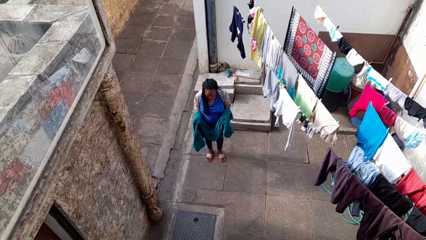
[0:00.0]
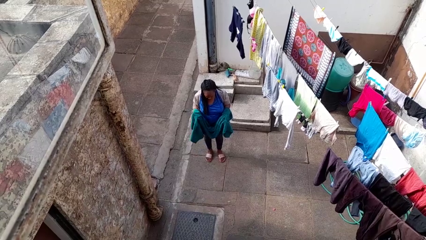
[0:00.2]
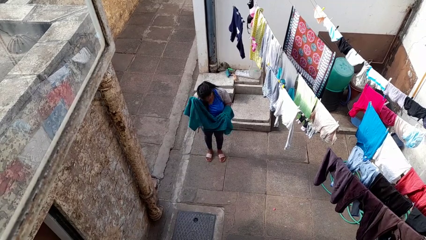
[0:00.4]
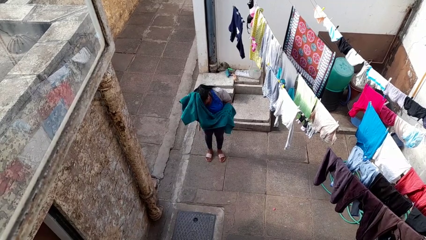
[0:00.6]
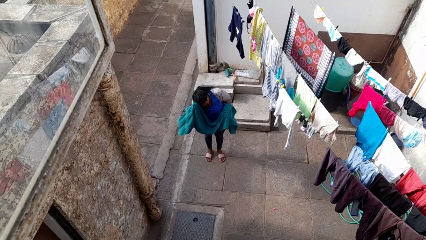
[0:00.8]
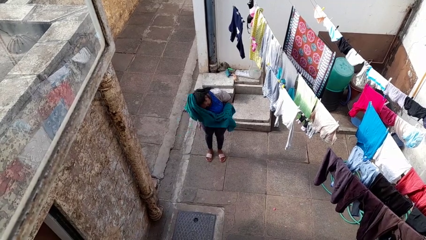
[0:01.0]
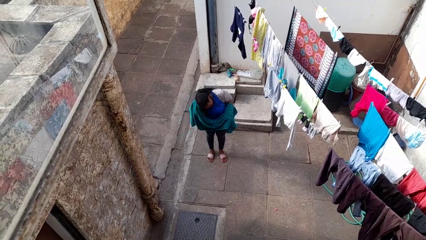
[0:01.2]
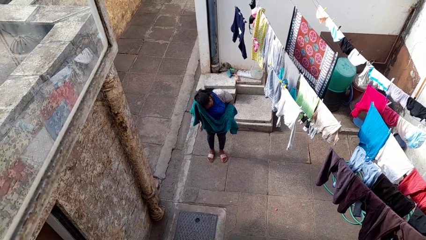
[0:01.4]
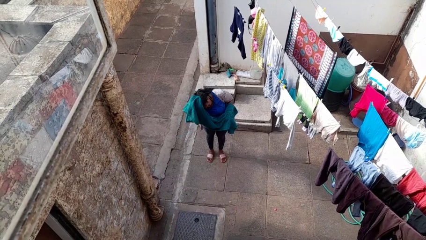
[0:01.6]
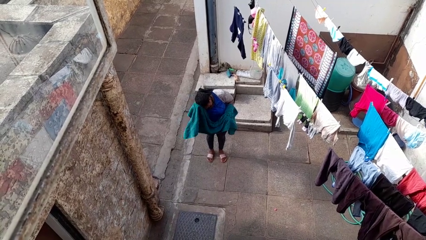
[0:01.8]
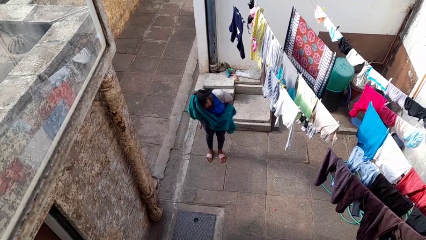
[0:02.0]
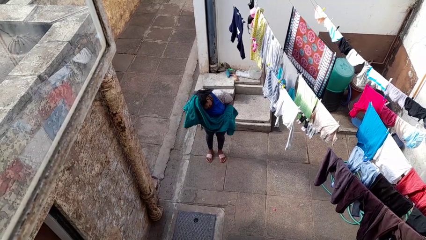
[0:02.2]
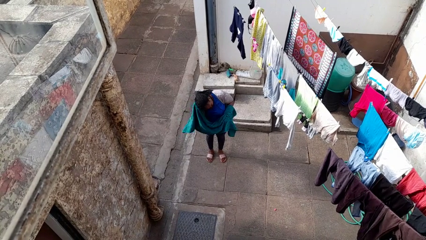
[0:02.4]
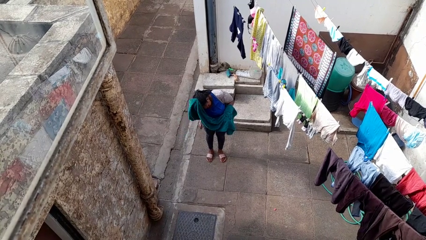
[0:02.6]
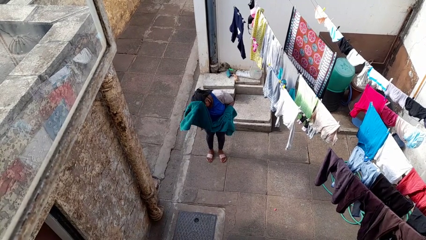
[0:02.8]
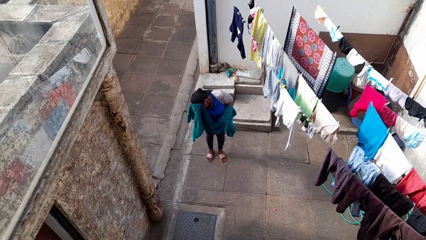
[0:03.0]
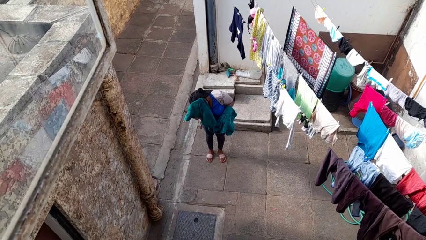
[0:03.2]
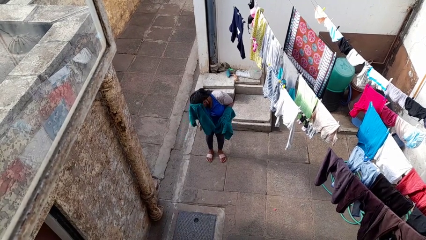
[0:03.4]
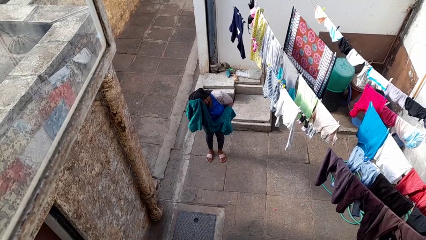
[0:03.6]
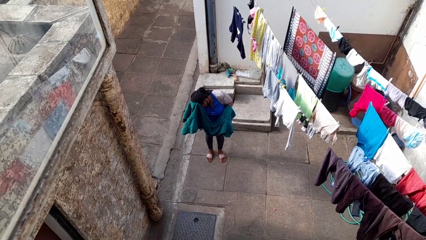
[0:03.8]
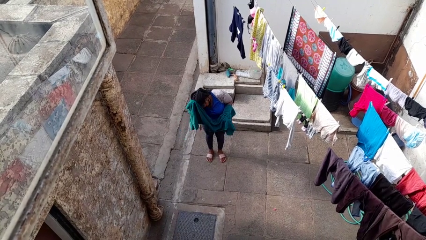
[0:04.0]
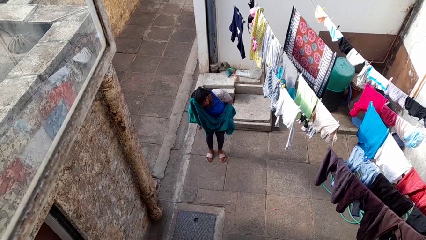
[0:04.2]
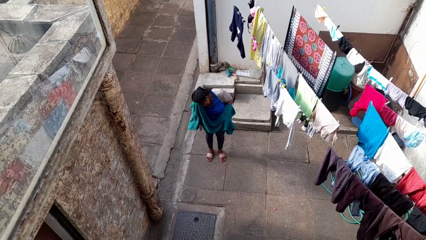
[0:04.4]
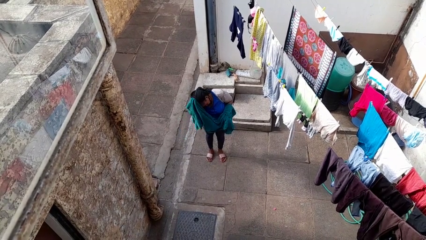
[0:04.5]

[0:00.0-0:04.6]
person dries hair with towel

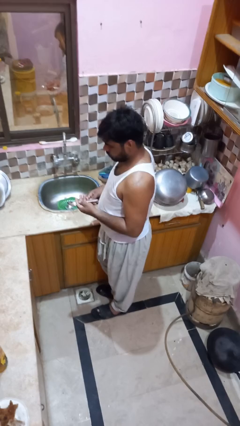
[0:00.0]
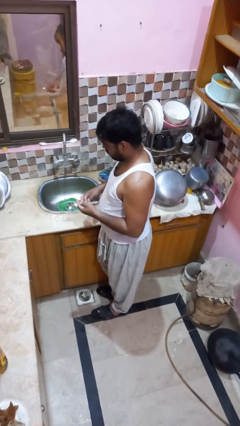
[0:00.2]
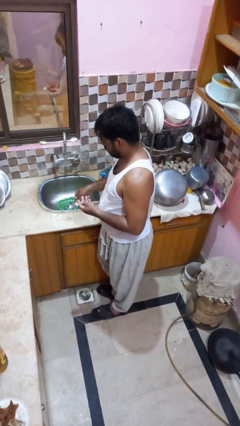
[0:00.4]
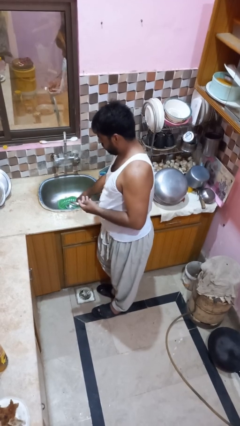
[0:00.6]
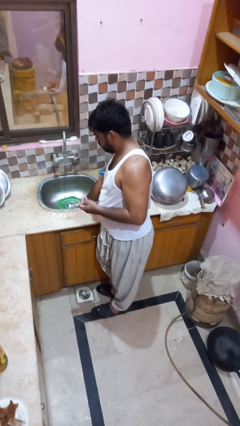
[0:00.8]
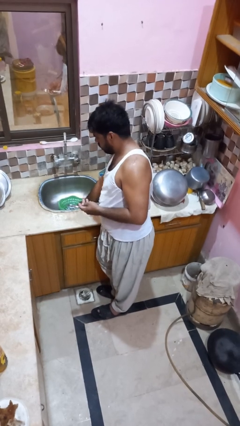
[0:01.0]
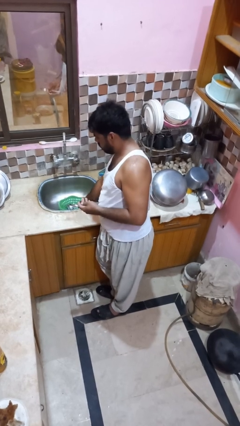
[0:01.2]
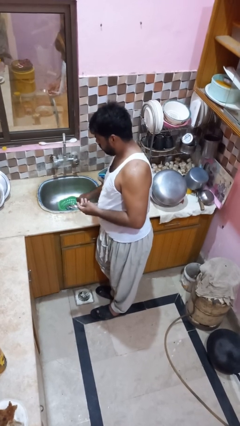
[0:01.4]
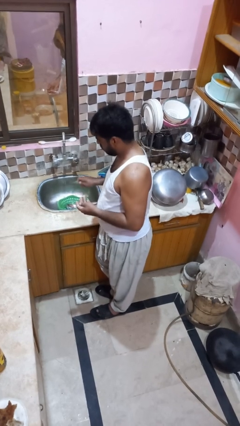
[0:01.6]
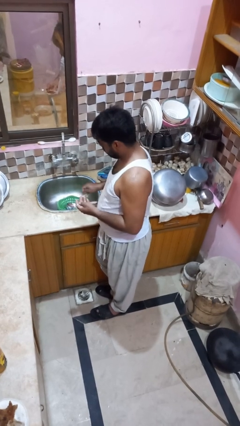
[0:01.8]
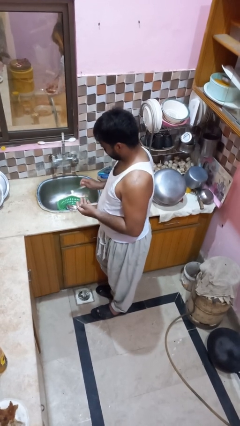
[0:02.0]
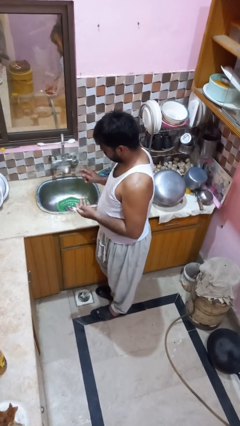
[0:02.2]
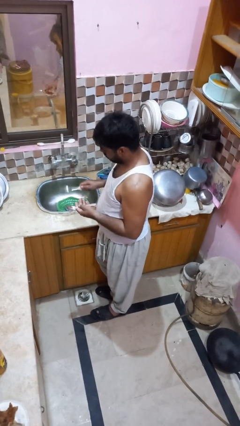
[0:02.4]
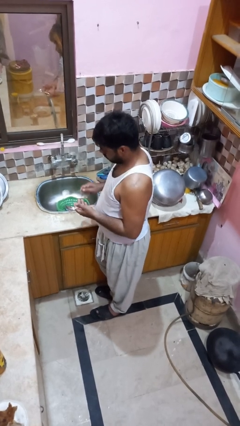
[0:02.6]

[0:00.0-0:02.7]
person unloads dishwasher

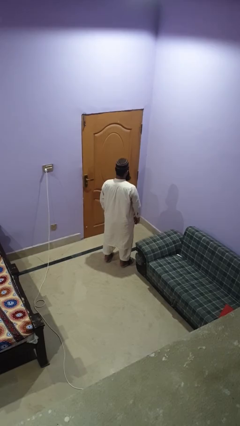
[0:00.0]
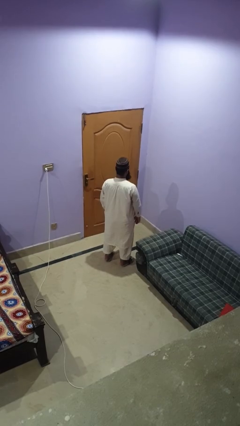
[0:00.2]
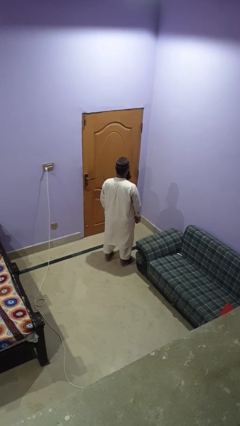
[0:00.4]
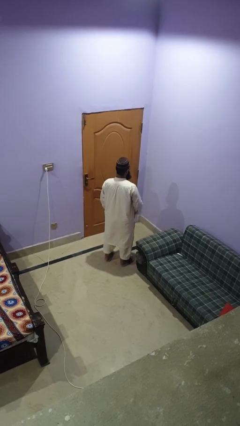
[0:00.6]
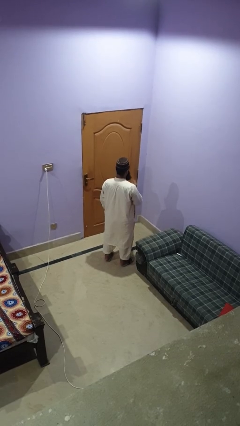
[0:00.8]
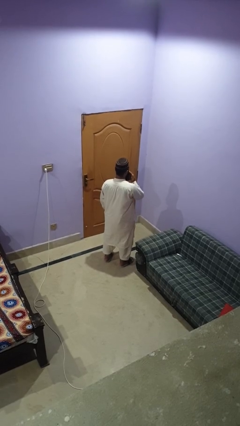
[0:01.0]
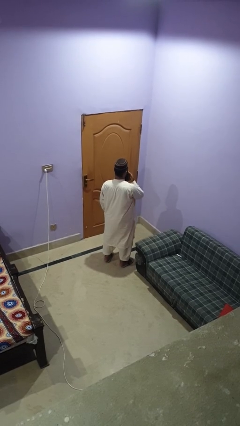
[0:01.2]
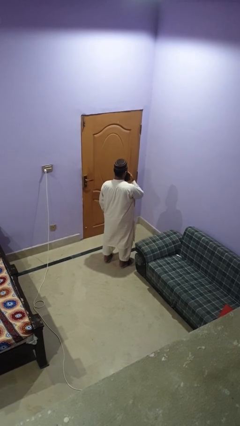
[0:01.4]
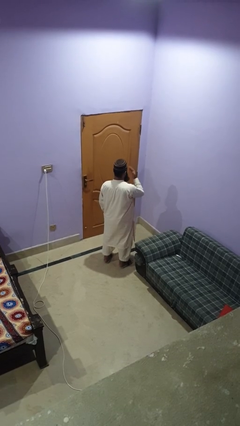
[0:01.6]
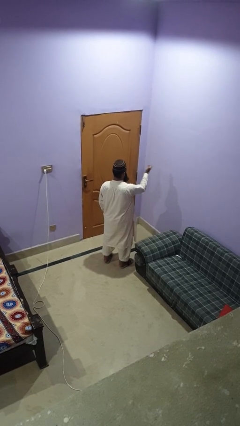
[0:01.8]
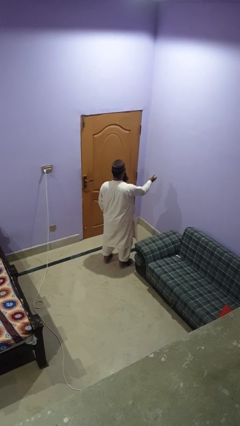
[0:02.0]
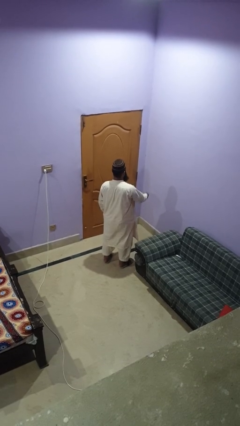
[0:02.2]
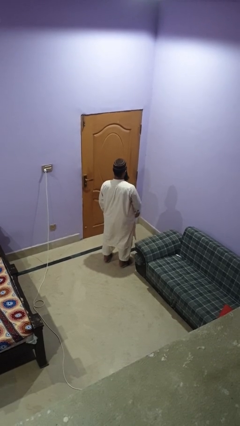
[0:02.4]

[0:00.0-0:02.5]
person gestures blow kiss

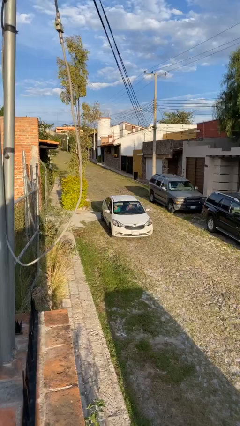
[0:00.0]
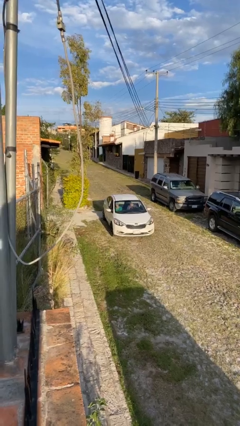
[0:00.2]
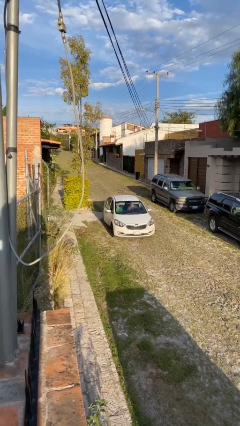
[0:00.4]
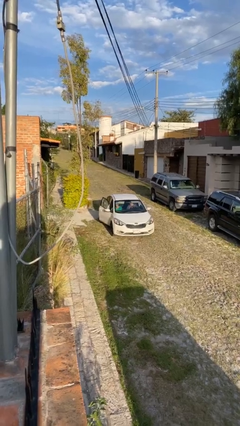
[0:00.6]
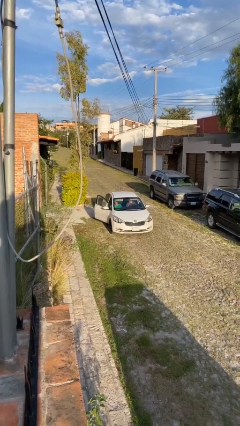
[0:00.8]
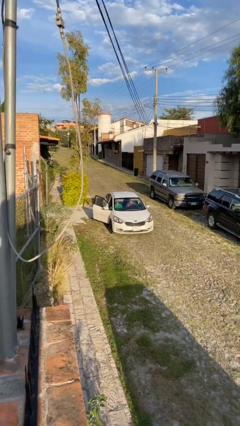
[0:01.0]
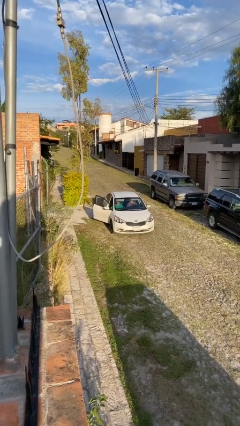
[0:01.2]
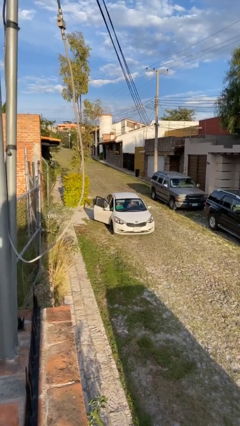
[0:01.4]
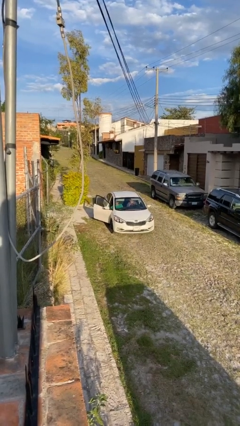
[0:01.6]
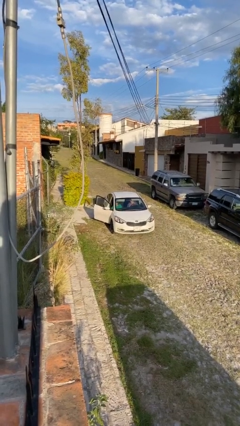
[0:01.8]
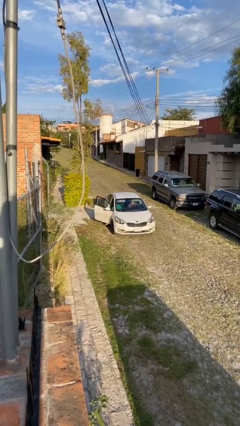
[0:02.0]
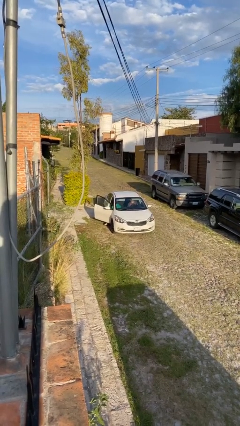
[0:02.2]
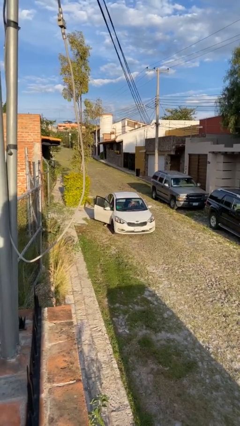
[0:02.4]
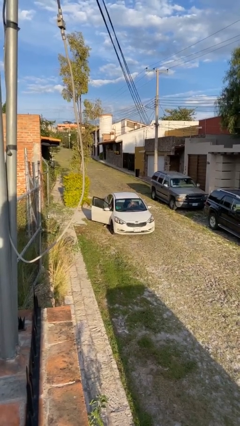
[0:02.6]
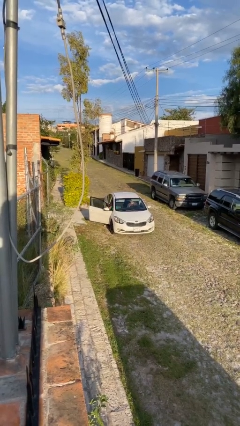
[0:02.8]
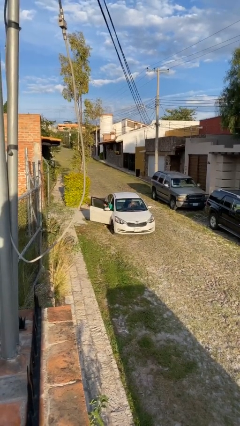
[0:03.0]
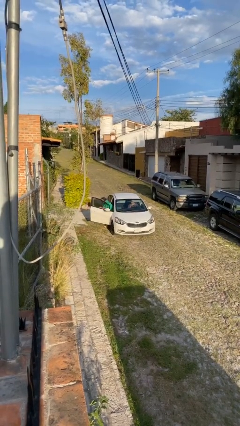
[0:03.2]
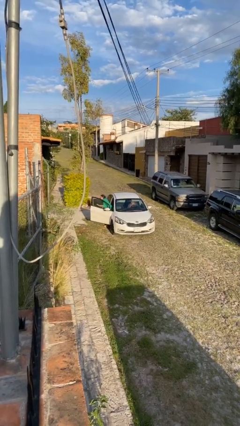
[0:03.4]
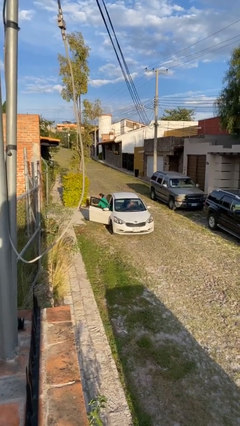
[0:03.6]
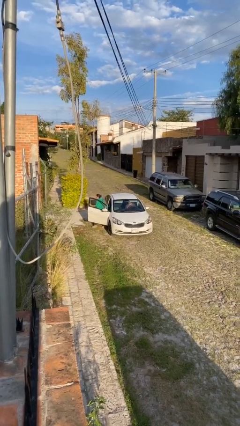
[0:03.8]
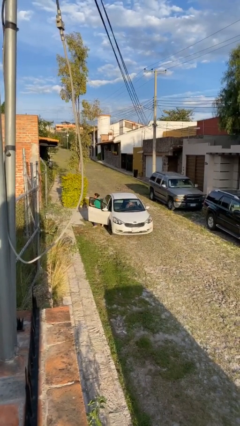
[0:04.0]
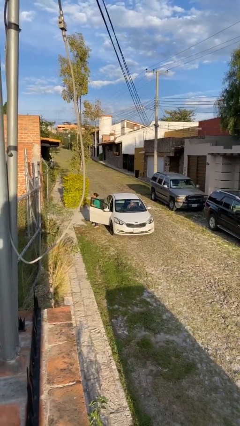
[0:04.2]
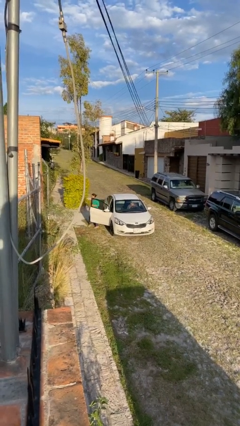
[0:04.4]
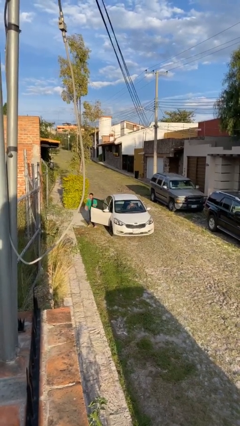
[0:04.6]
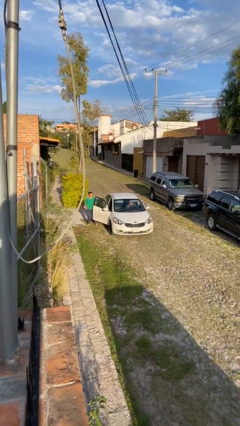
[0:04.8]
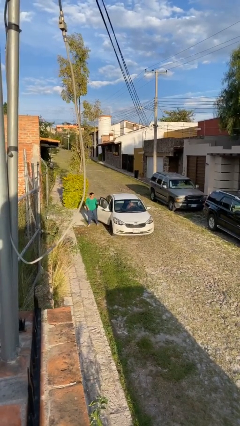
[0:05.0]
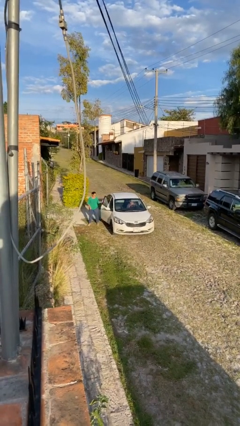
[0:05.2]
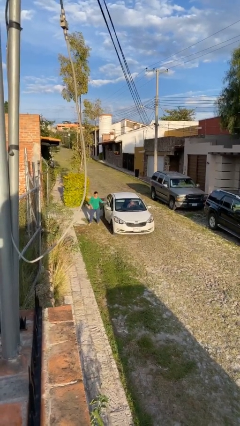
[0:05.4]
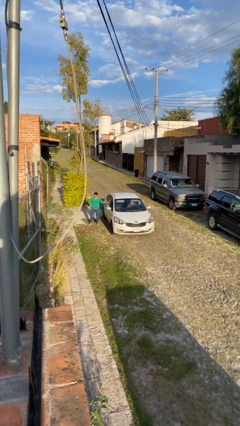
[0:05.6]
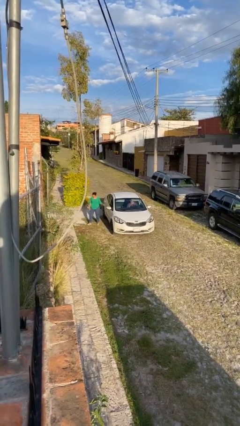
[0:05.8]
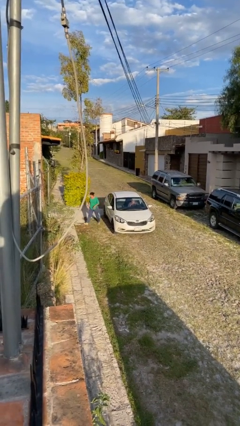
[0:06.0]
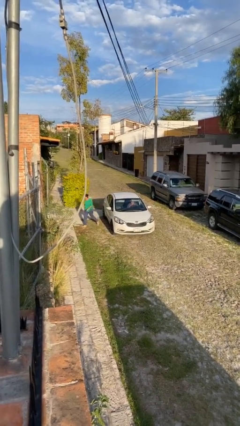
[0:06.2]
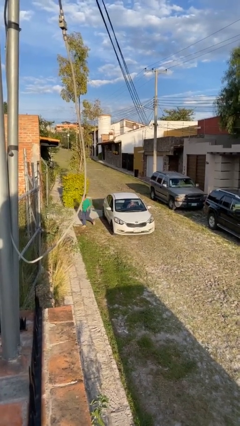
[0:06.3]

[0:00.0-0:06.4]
car drops off person

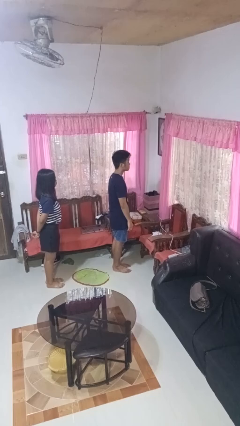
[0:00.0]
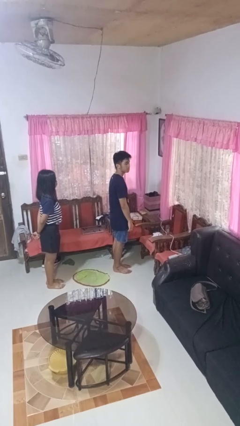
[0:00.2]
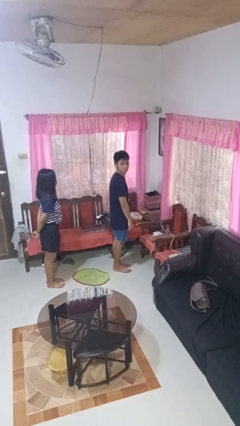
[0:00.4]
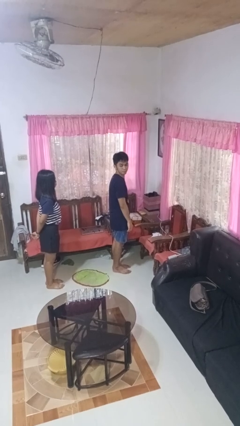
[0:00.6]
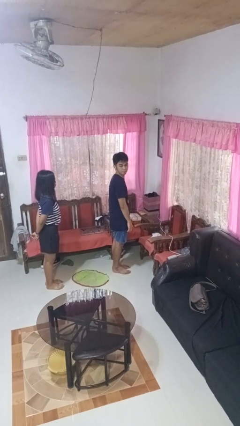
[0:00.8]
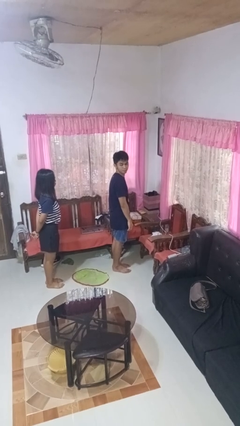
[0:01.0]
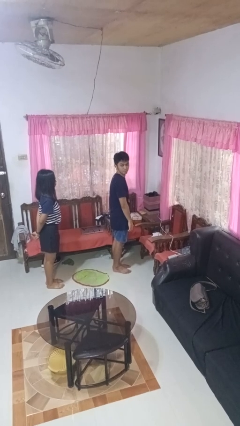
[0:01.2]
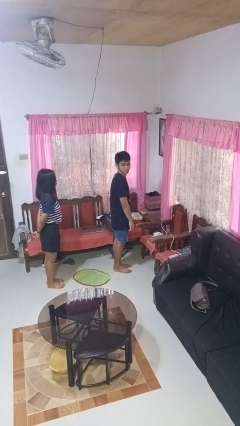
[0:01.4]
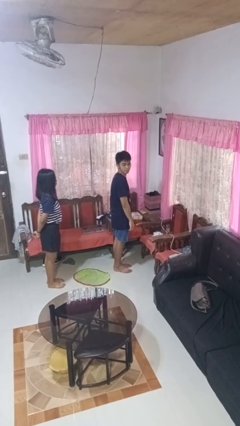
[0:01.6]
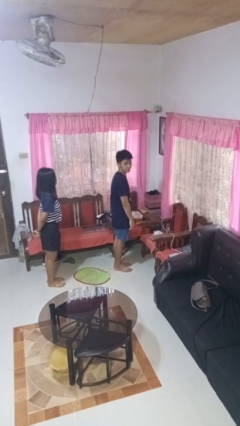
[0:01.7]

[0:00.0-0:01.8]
person looks over shoulder
